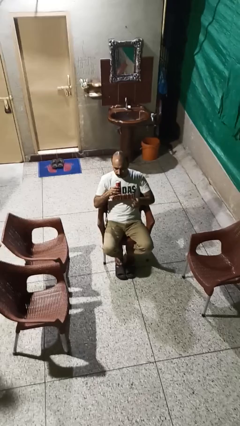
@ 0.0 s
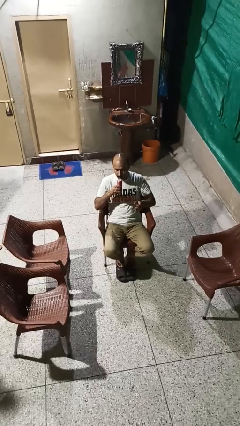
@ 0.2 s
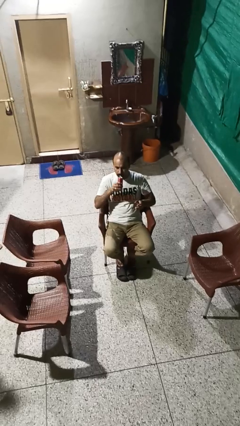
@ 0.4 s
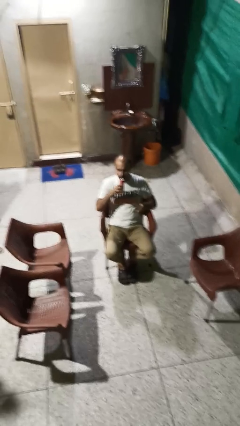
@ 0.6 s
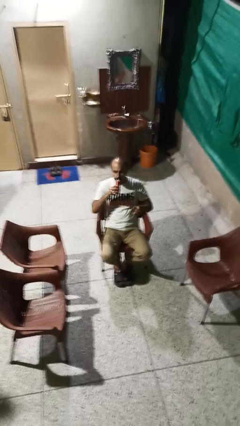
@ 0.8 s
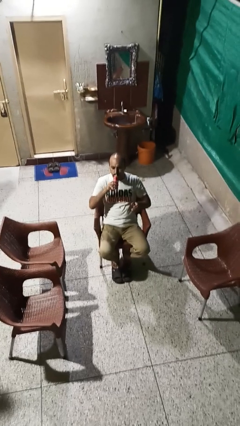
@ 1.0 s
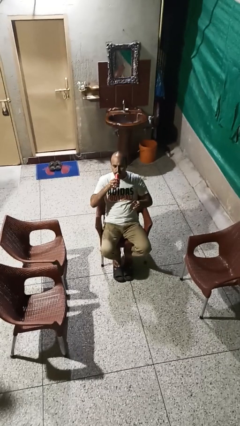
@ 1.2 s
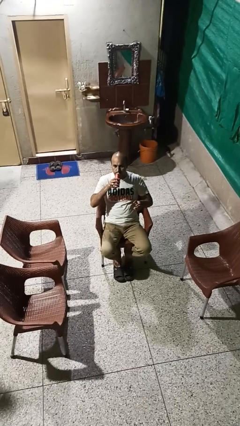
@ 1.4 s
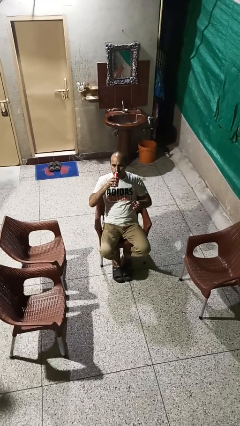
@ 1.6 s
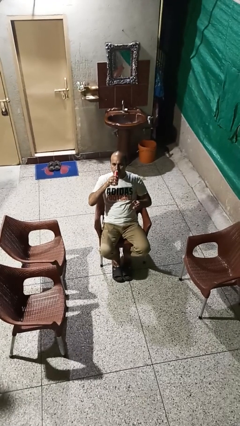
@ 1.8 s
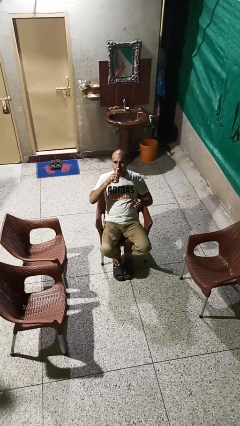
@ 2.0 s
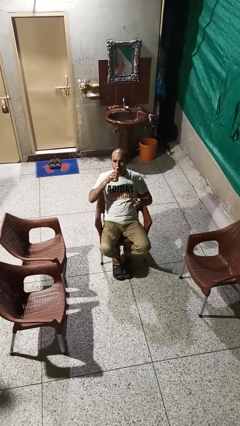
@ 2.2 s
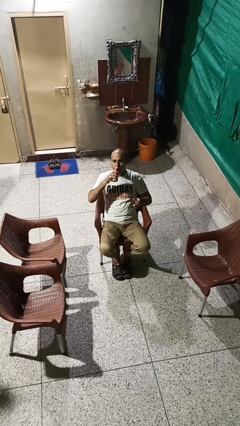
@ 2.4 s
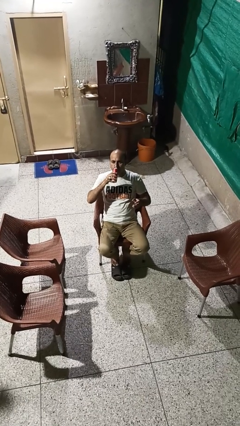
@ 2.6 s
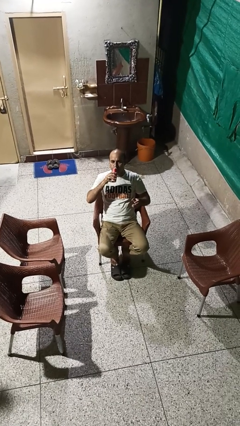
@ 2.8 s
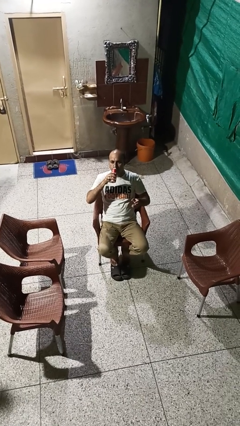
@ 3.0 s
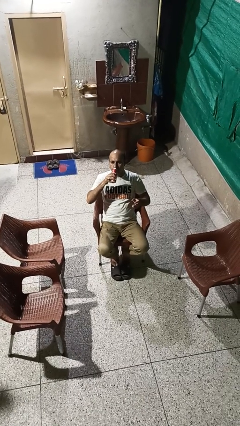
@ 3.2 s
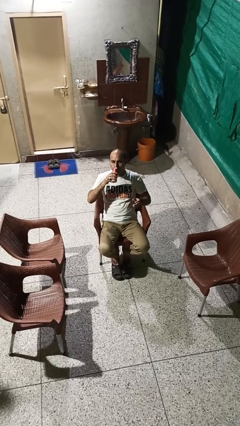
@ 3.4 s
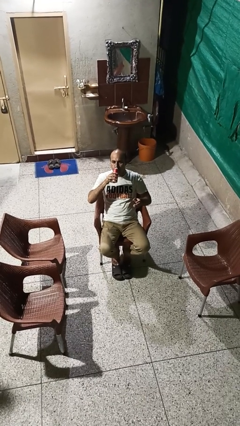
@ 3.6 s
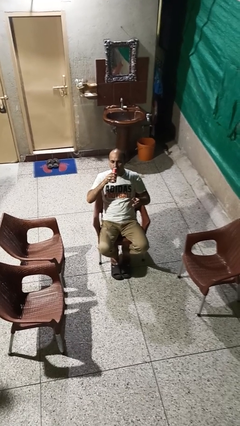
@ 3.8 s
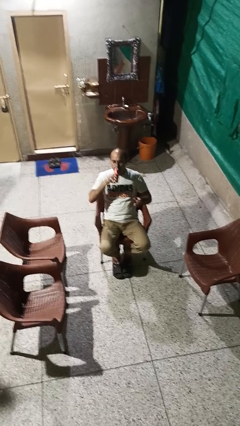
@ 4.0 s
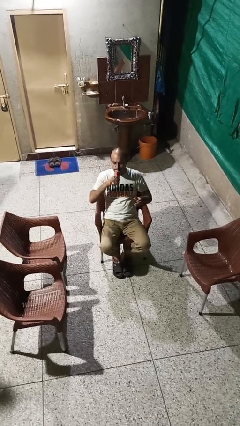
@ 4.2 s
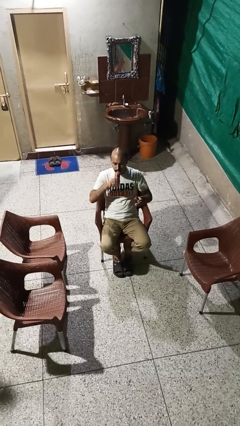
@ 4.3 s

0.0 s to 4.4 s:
person drinks from beverage can

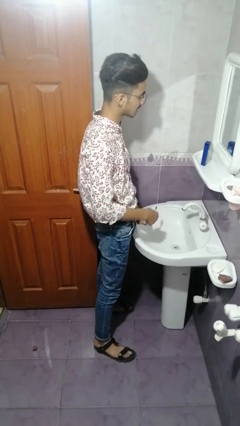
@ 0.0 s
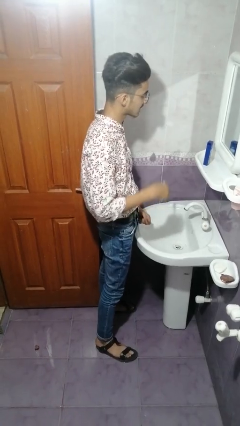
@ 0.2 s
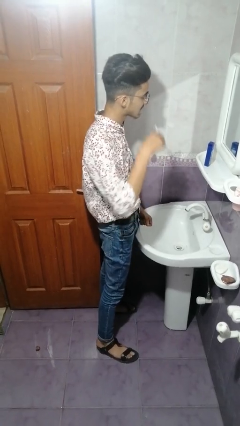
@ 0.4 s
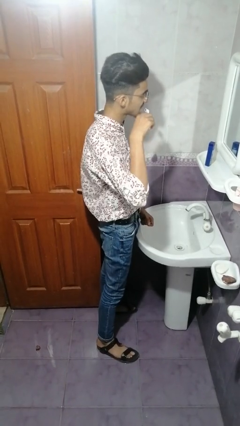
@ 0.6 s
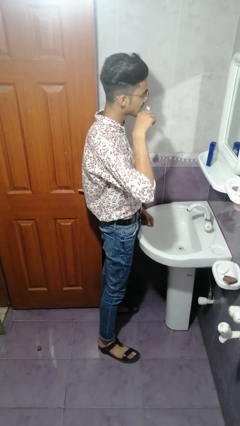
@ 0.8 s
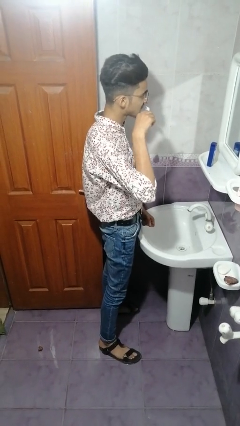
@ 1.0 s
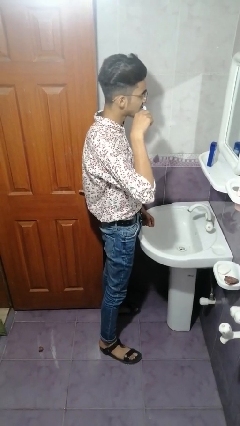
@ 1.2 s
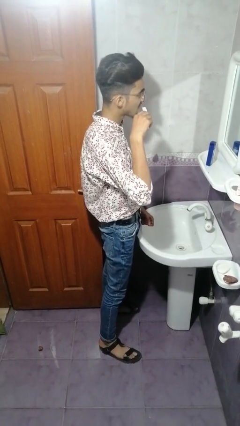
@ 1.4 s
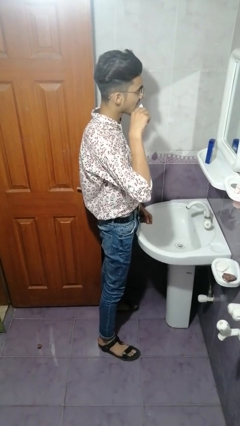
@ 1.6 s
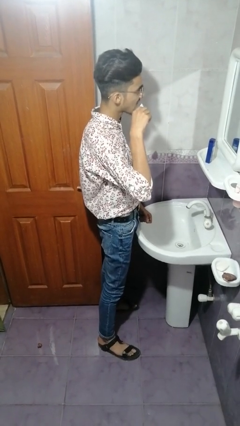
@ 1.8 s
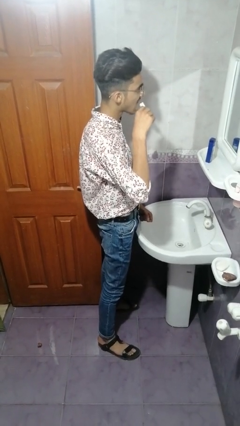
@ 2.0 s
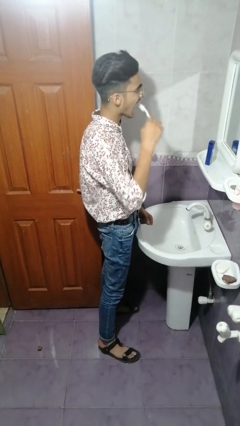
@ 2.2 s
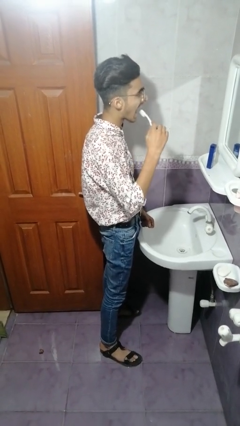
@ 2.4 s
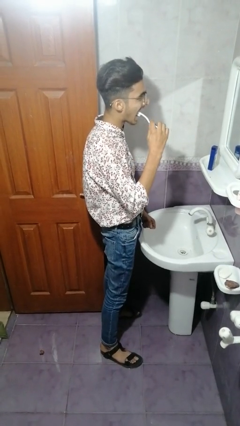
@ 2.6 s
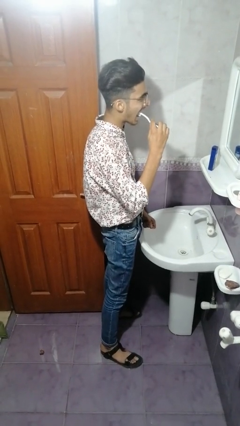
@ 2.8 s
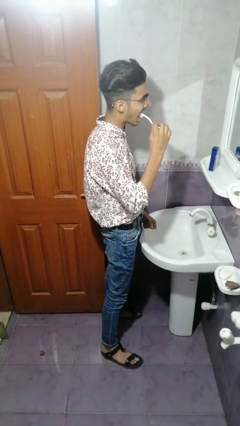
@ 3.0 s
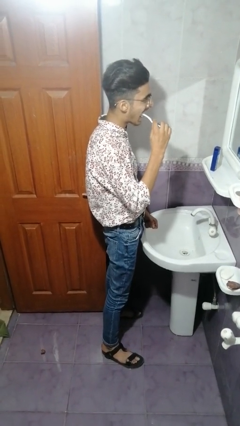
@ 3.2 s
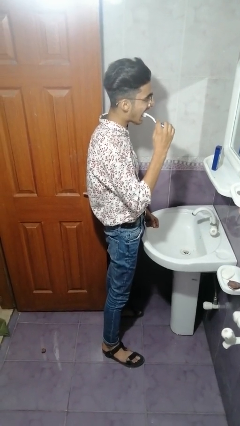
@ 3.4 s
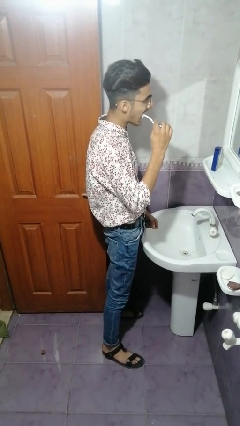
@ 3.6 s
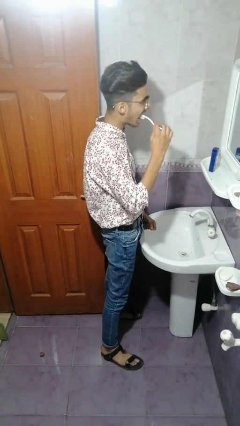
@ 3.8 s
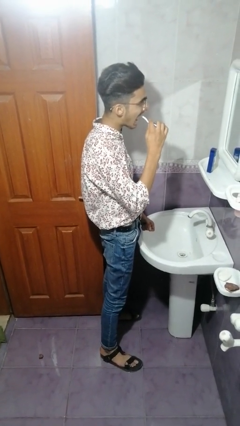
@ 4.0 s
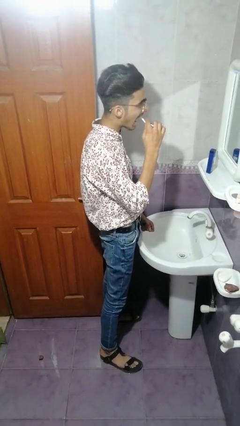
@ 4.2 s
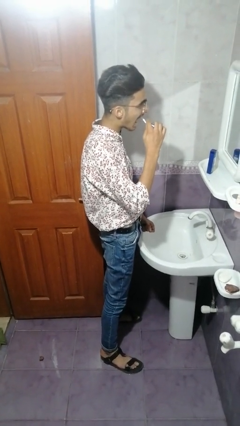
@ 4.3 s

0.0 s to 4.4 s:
person brushes teeth

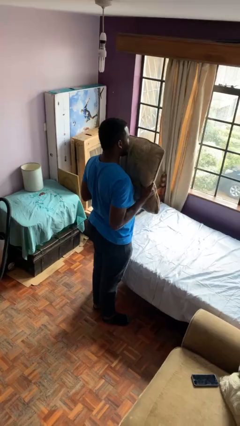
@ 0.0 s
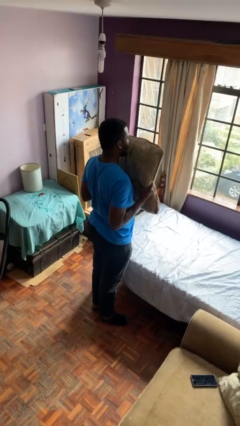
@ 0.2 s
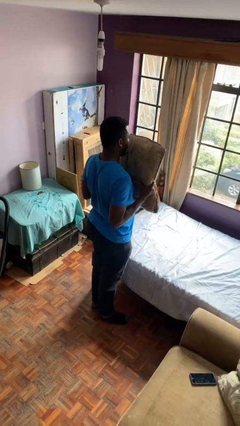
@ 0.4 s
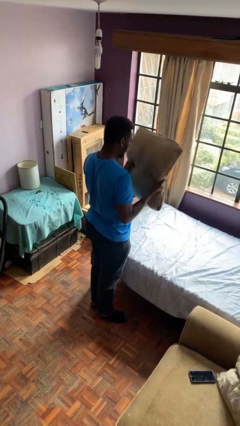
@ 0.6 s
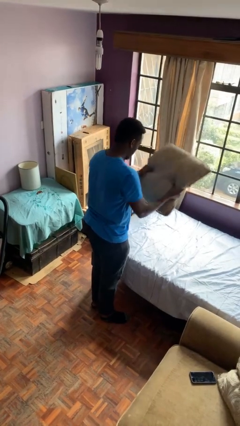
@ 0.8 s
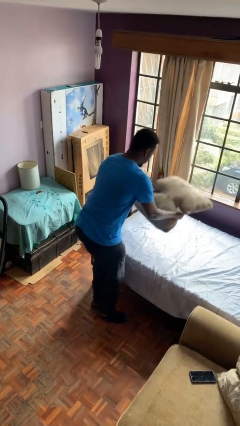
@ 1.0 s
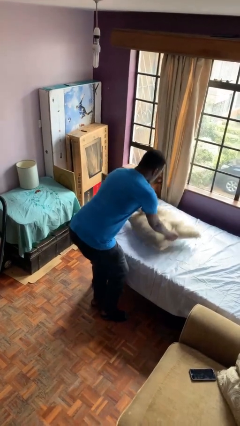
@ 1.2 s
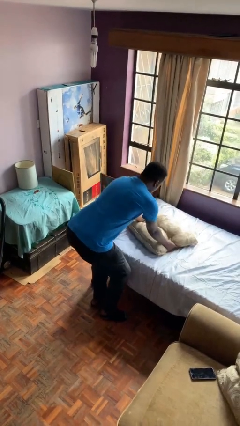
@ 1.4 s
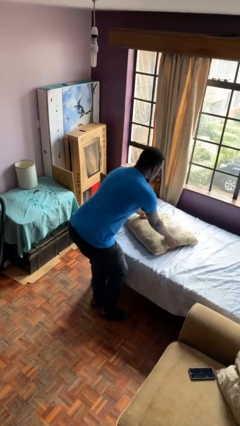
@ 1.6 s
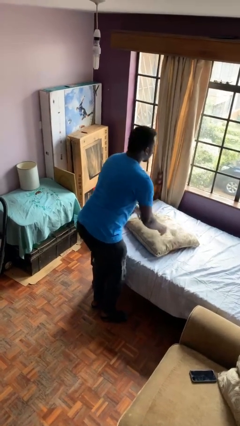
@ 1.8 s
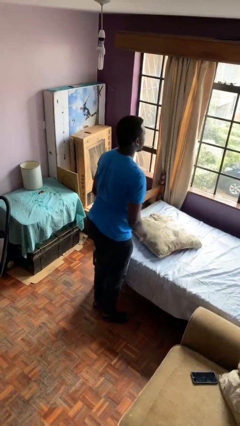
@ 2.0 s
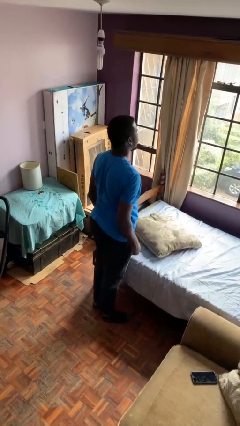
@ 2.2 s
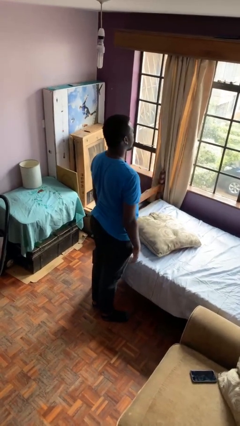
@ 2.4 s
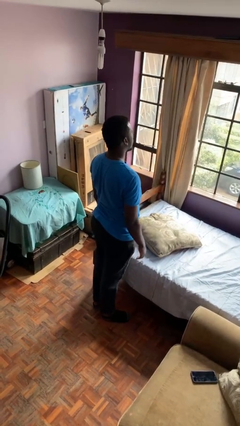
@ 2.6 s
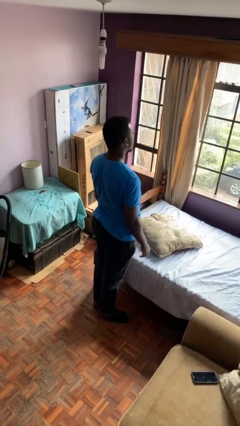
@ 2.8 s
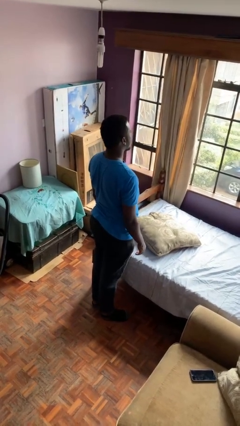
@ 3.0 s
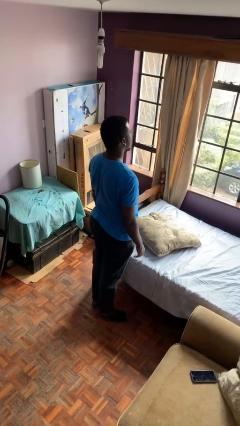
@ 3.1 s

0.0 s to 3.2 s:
person puts down object on bed

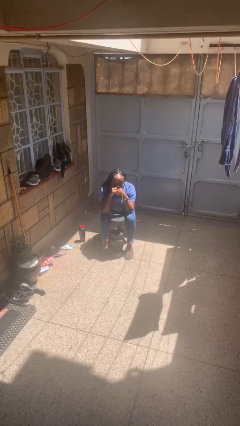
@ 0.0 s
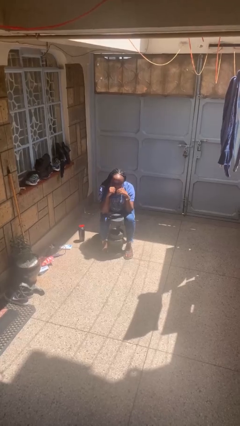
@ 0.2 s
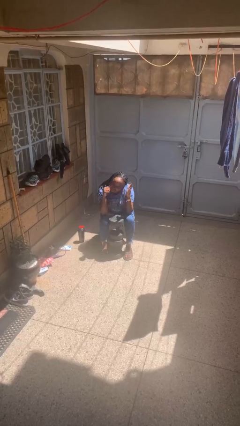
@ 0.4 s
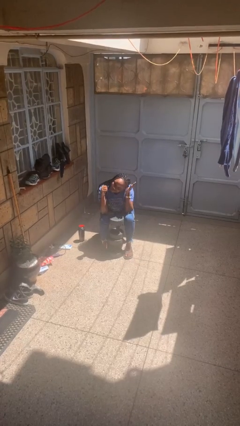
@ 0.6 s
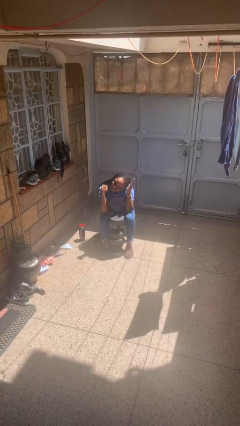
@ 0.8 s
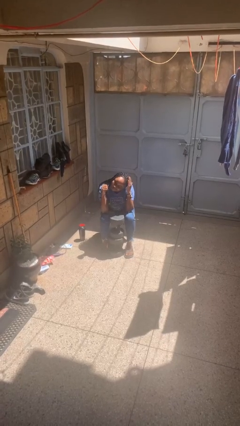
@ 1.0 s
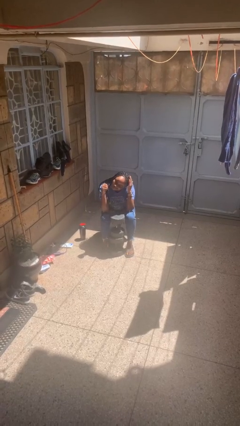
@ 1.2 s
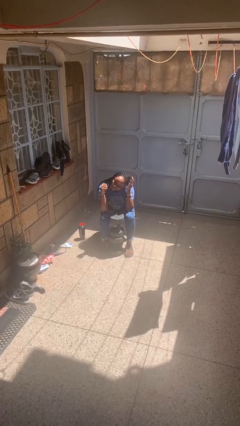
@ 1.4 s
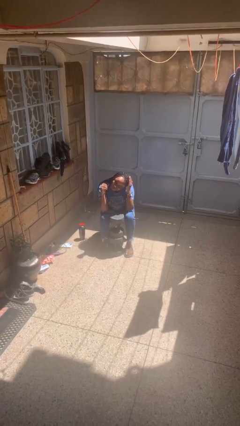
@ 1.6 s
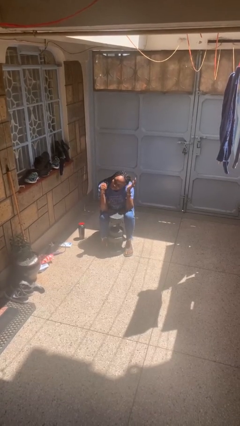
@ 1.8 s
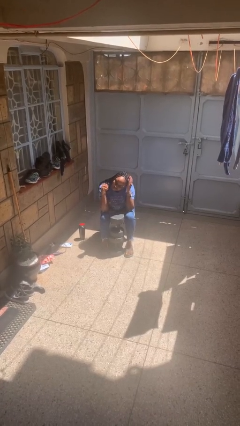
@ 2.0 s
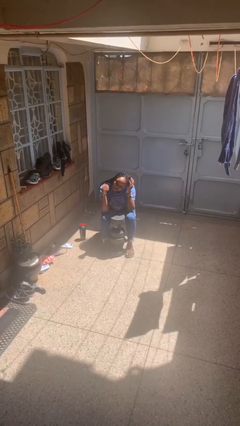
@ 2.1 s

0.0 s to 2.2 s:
person pats head

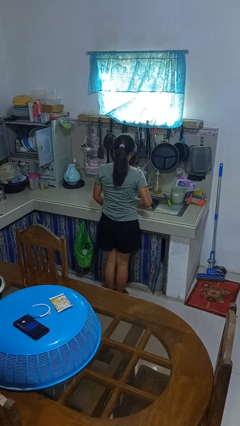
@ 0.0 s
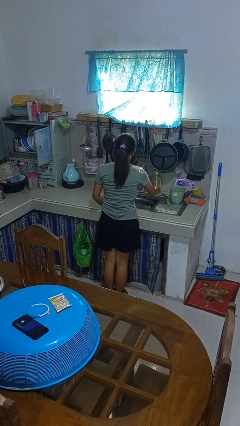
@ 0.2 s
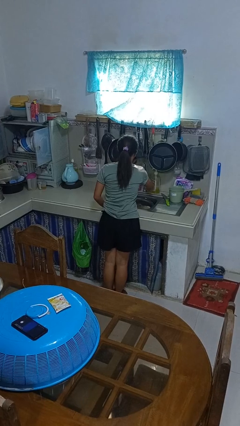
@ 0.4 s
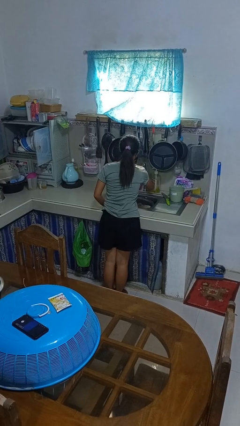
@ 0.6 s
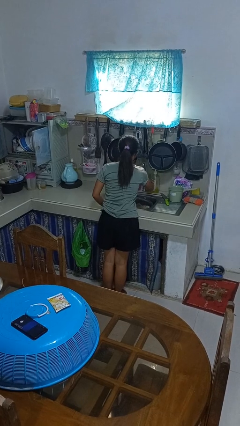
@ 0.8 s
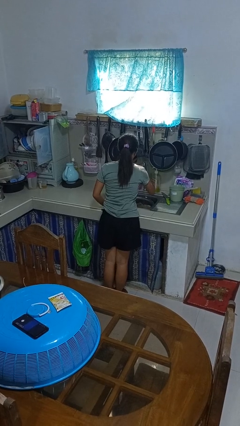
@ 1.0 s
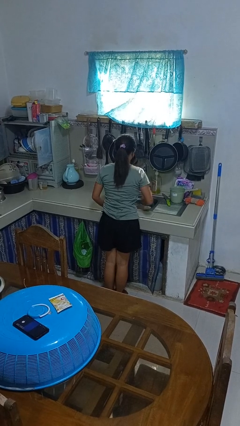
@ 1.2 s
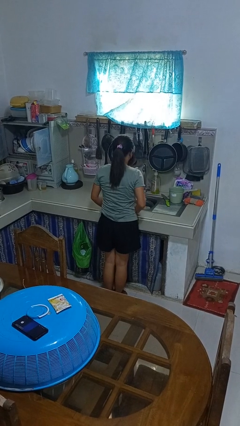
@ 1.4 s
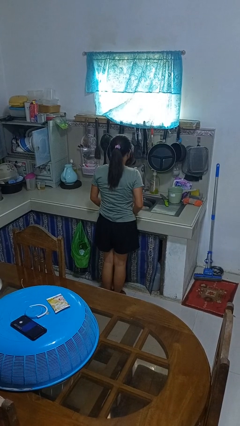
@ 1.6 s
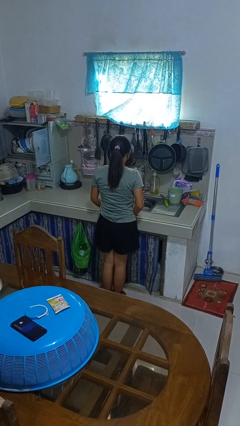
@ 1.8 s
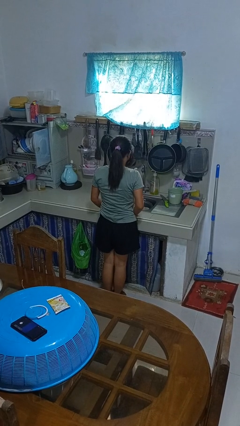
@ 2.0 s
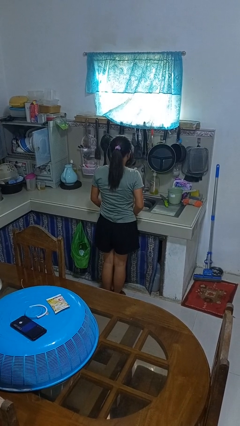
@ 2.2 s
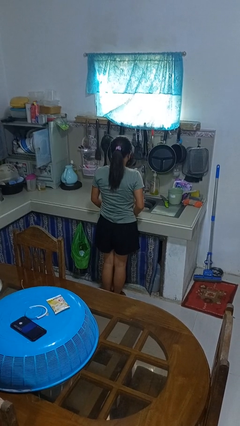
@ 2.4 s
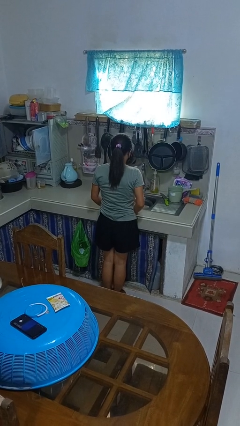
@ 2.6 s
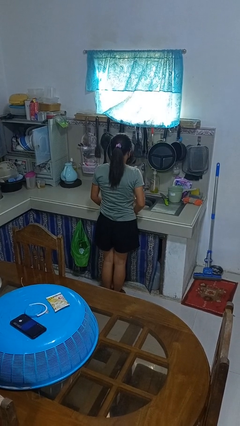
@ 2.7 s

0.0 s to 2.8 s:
person turns on faucet

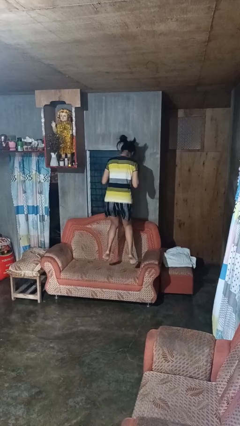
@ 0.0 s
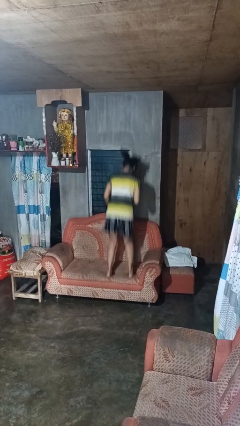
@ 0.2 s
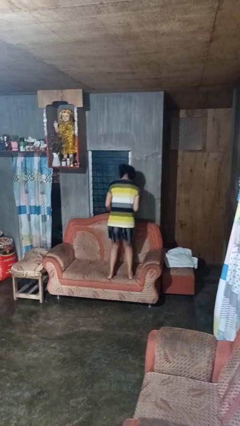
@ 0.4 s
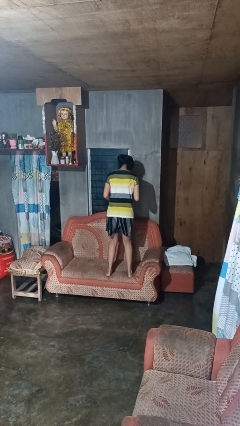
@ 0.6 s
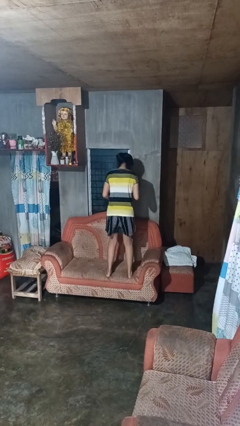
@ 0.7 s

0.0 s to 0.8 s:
person jumps on couch
